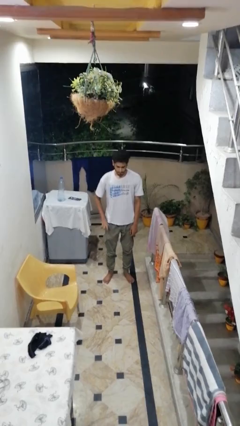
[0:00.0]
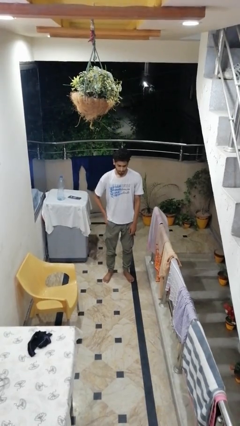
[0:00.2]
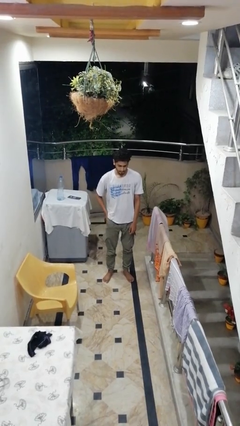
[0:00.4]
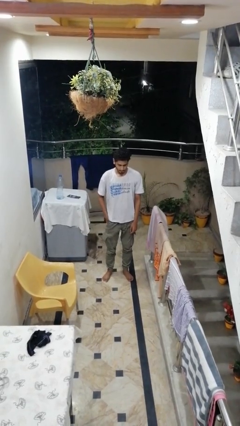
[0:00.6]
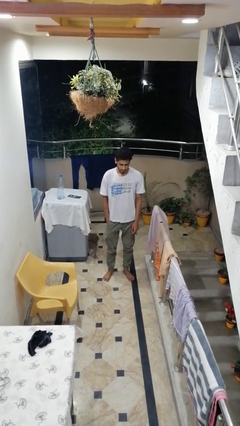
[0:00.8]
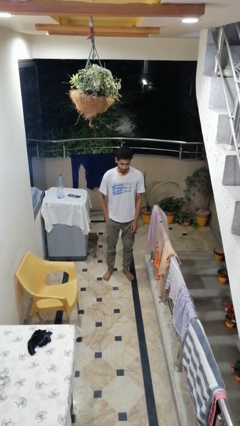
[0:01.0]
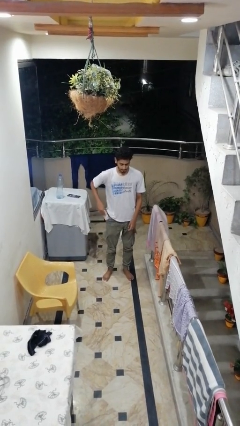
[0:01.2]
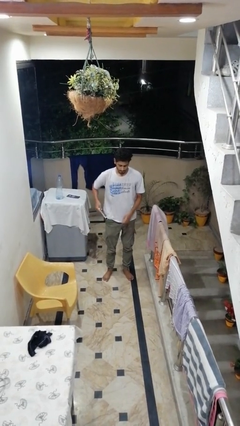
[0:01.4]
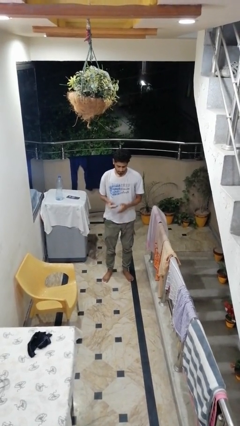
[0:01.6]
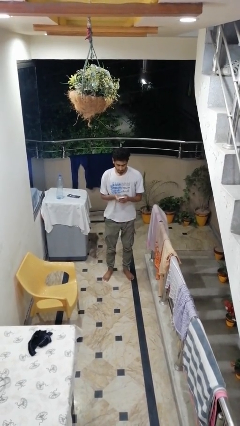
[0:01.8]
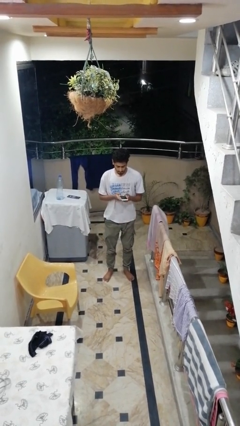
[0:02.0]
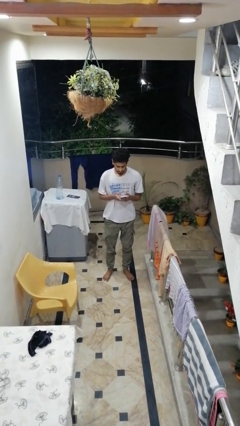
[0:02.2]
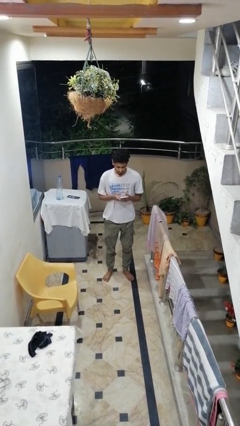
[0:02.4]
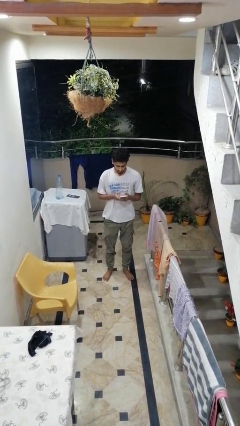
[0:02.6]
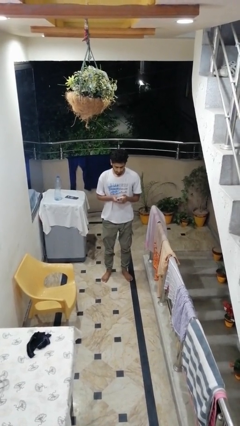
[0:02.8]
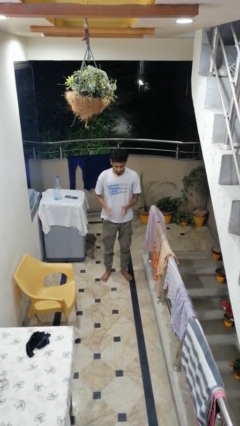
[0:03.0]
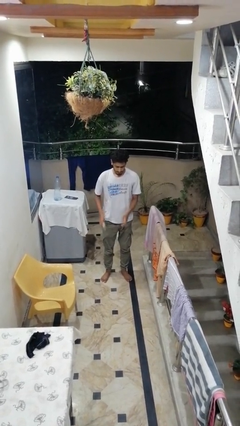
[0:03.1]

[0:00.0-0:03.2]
person takes phone from pocket

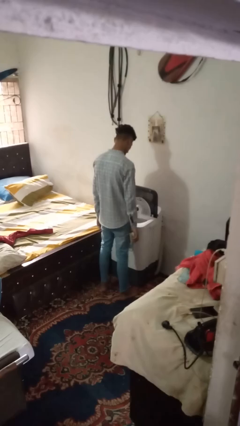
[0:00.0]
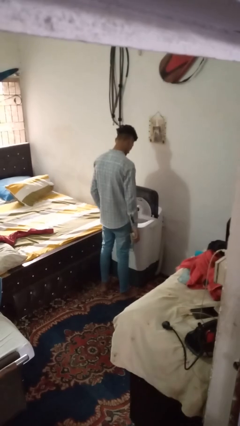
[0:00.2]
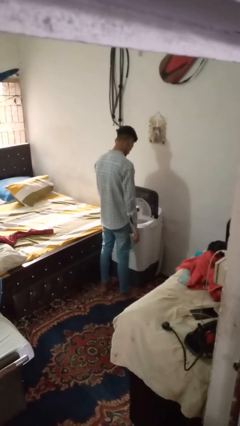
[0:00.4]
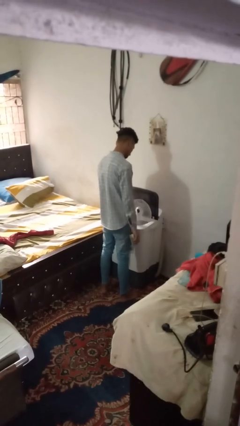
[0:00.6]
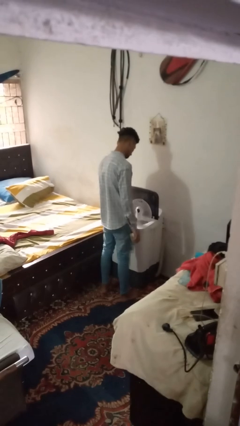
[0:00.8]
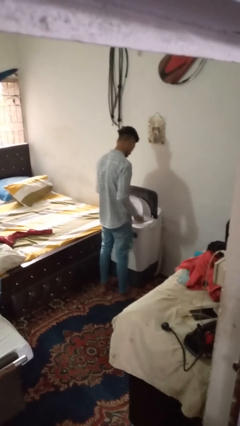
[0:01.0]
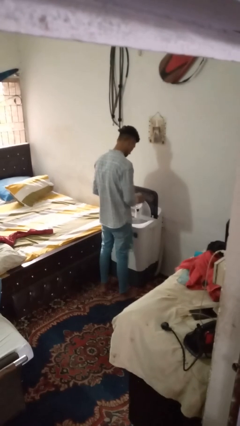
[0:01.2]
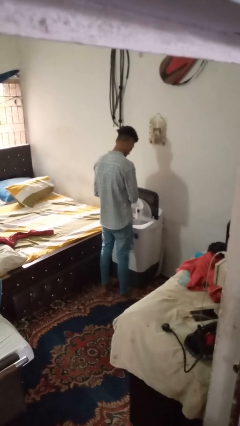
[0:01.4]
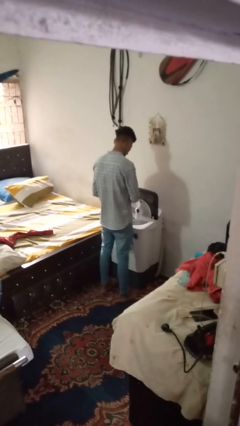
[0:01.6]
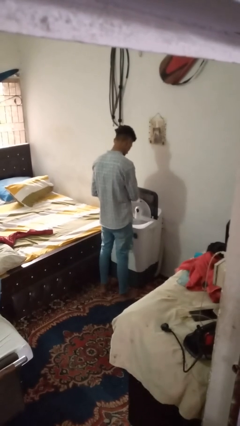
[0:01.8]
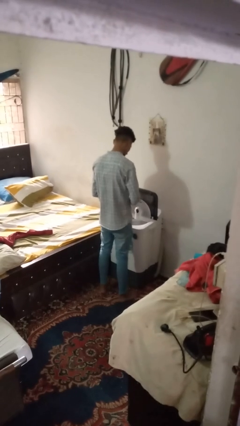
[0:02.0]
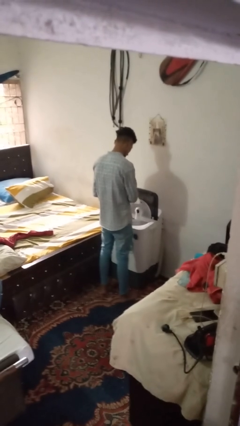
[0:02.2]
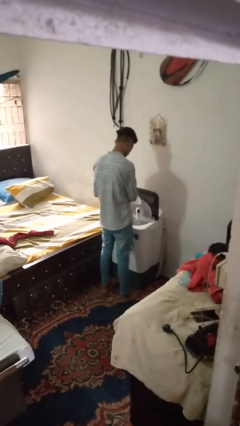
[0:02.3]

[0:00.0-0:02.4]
person cleans dryer lint trap

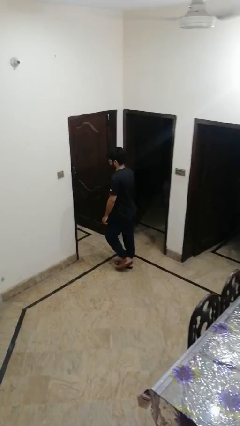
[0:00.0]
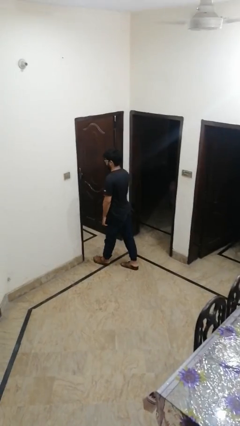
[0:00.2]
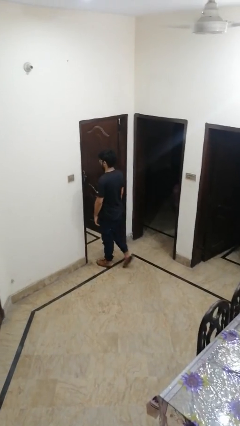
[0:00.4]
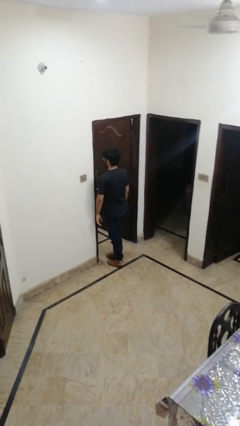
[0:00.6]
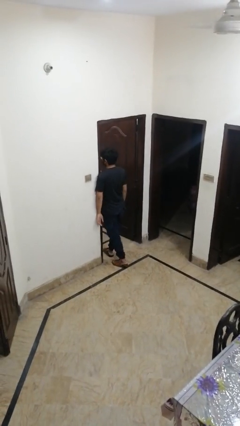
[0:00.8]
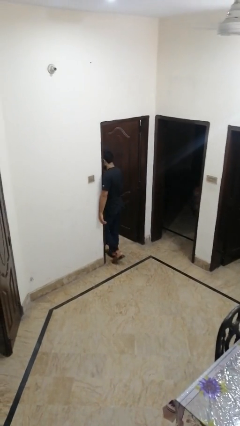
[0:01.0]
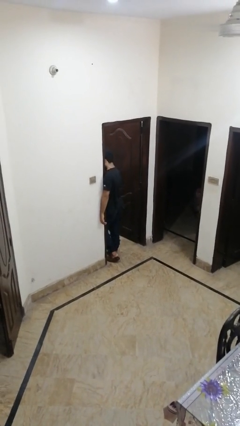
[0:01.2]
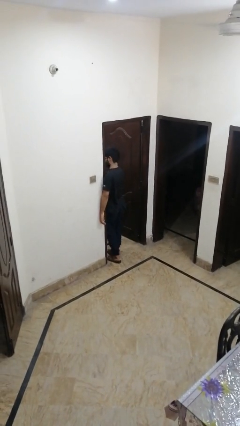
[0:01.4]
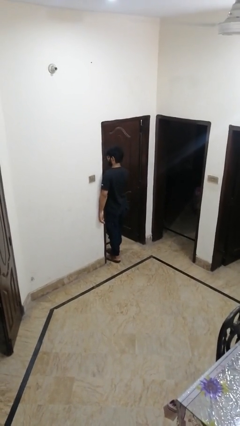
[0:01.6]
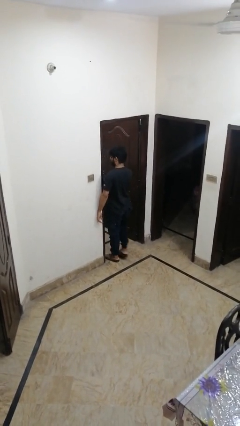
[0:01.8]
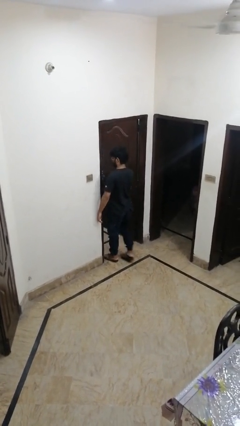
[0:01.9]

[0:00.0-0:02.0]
person bumps into wall

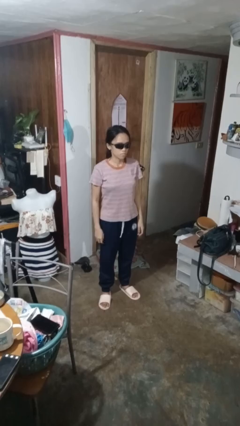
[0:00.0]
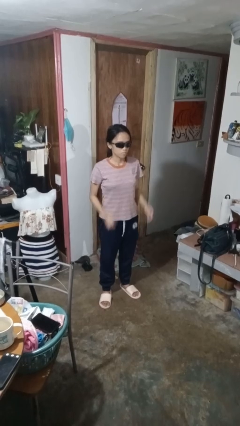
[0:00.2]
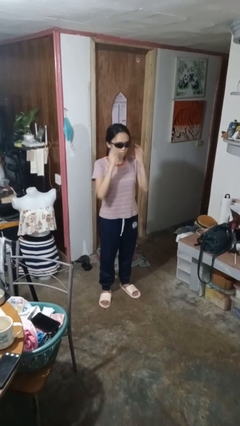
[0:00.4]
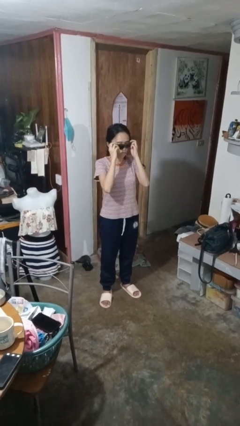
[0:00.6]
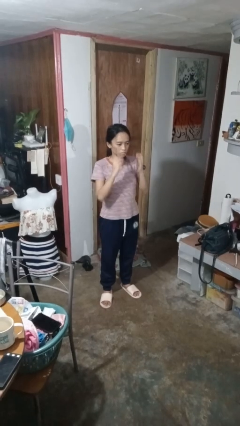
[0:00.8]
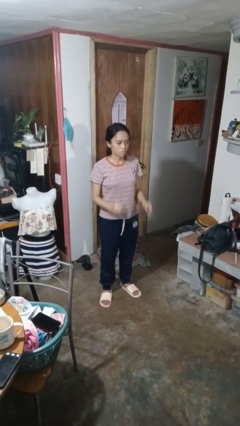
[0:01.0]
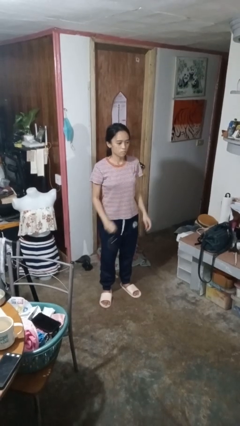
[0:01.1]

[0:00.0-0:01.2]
person takes off sunglasses

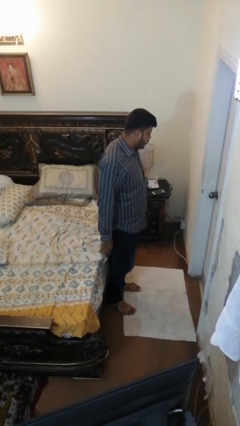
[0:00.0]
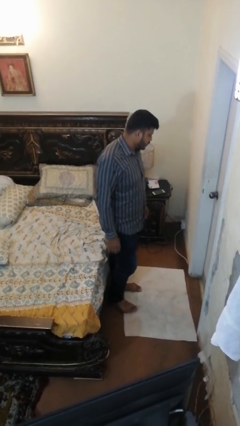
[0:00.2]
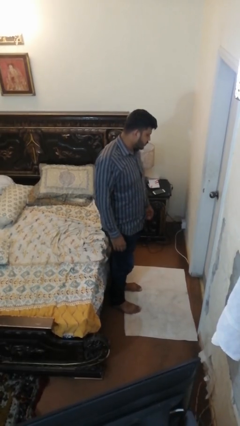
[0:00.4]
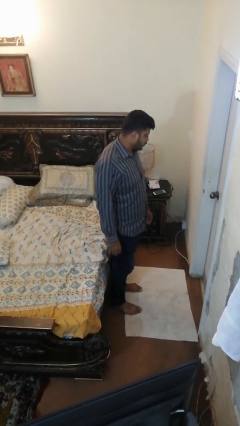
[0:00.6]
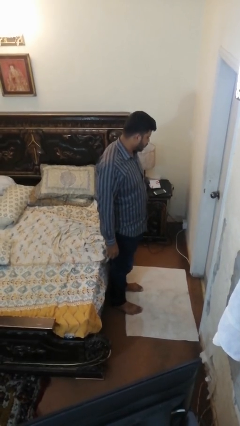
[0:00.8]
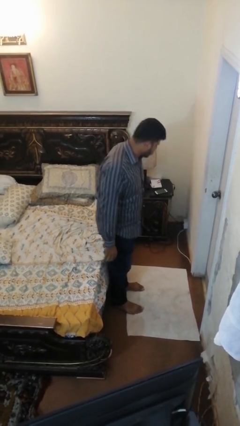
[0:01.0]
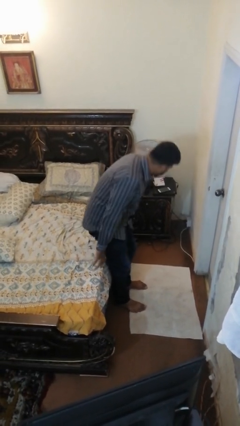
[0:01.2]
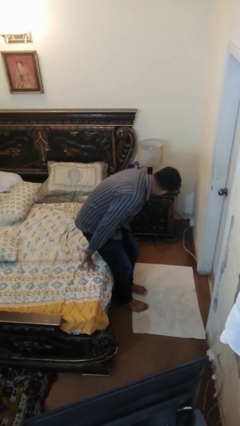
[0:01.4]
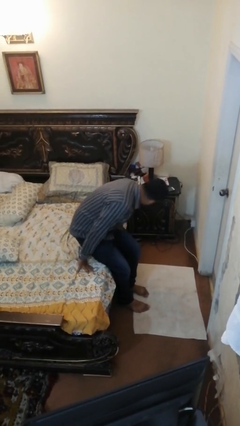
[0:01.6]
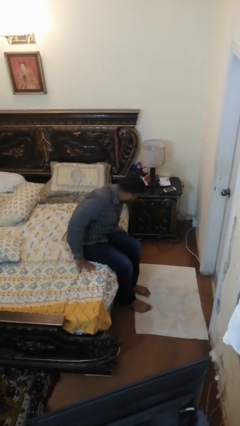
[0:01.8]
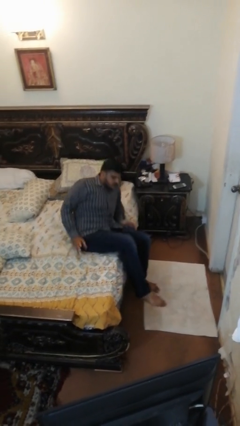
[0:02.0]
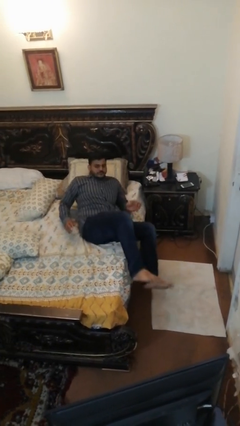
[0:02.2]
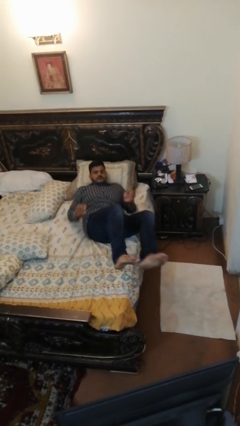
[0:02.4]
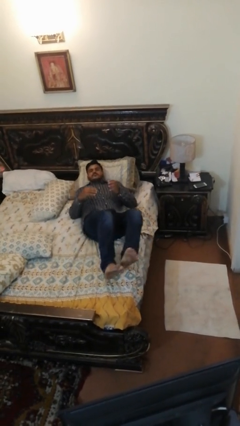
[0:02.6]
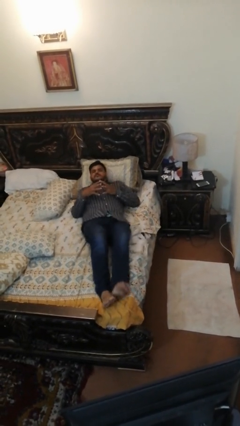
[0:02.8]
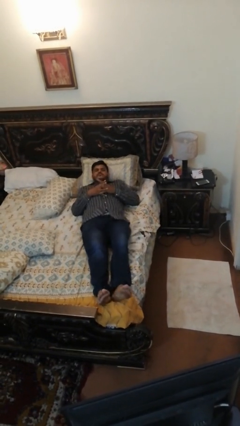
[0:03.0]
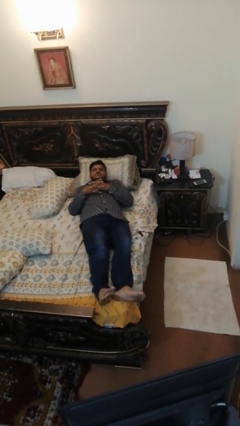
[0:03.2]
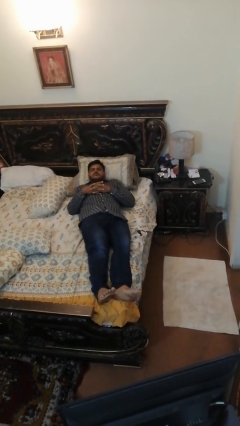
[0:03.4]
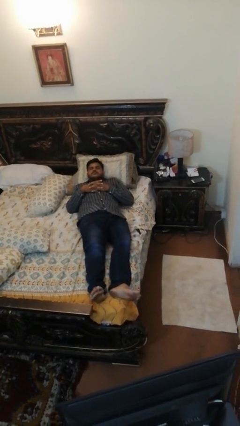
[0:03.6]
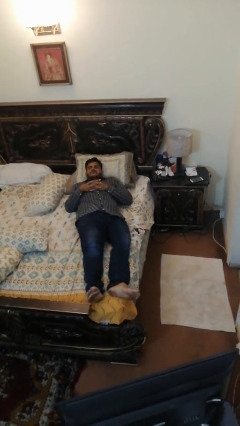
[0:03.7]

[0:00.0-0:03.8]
person lies down on bed

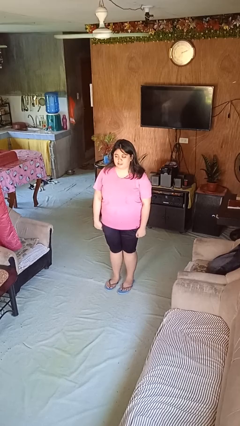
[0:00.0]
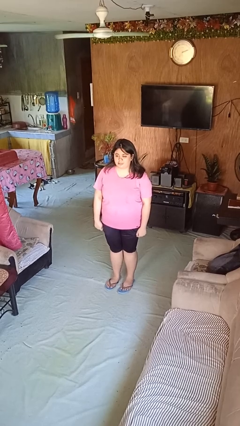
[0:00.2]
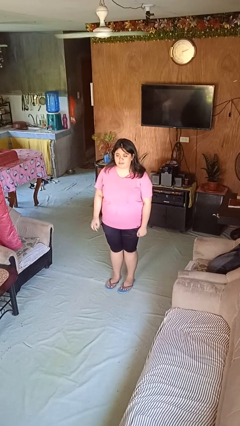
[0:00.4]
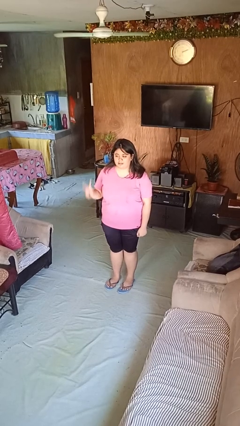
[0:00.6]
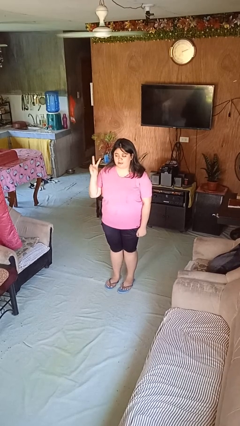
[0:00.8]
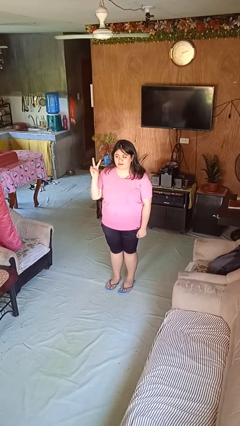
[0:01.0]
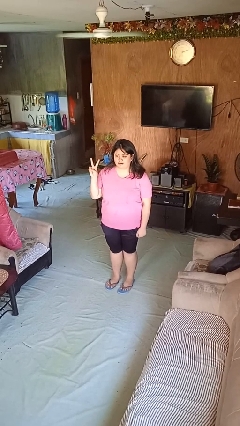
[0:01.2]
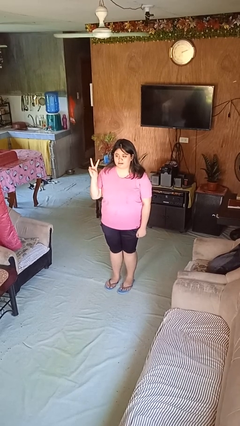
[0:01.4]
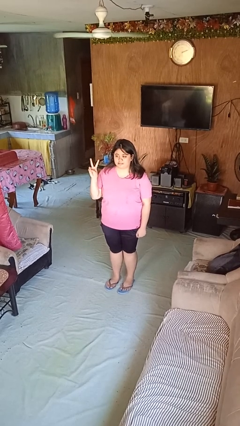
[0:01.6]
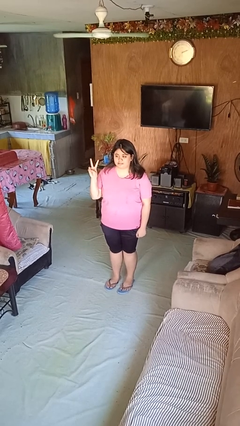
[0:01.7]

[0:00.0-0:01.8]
person gestures peace

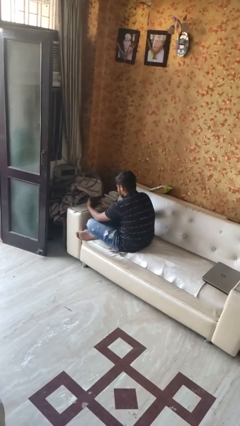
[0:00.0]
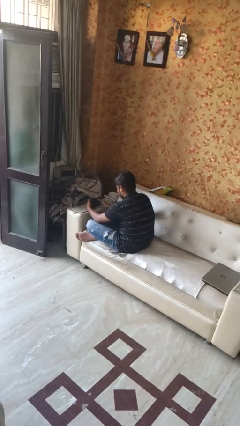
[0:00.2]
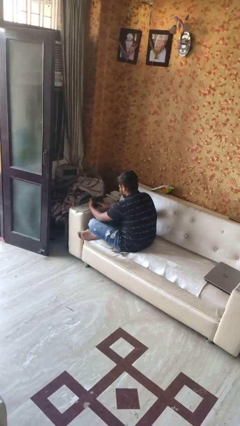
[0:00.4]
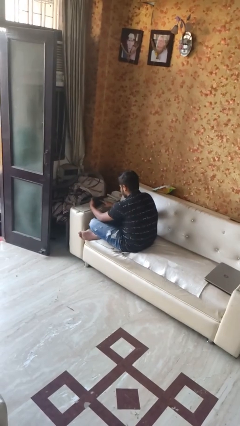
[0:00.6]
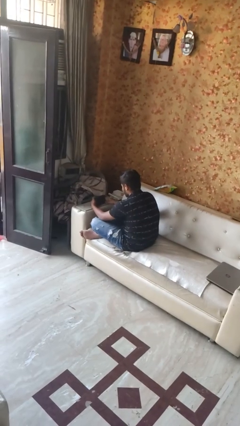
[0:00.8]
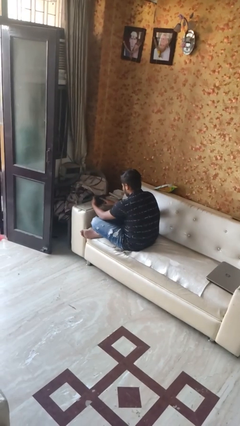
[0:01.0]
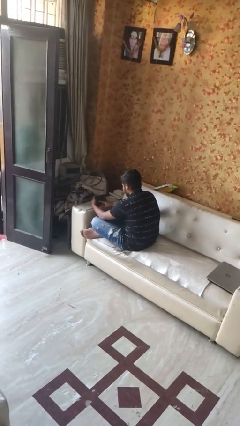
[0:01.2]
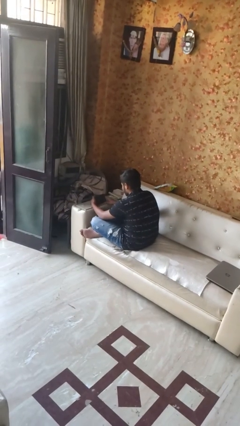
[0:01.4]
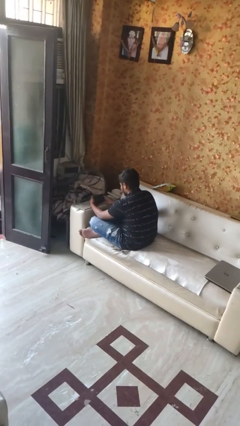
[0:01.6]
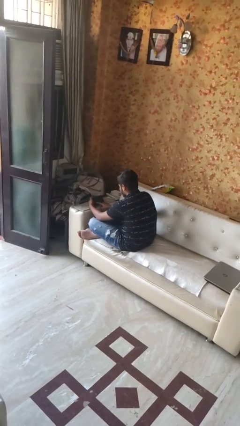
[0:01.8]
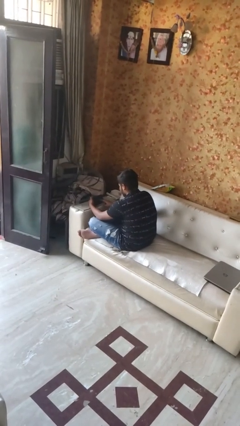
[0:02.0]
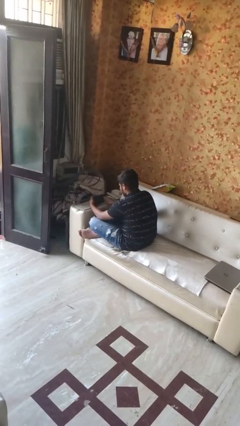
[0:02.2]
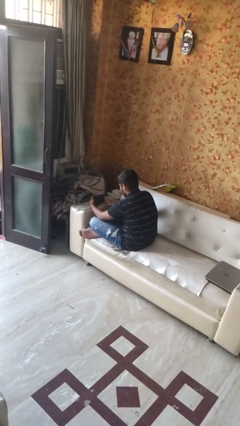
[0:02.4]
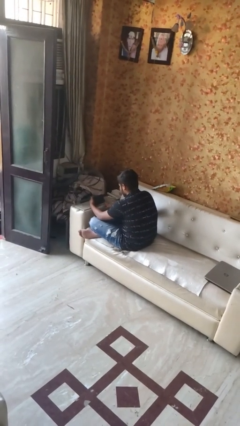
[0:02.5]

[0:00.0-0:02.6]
person interacts with tablet

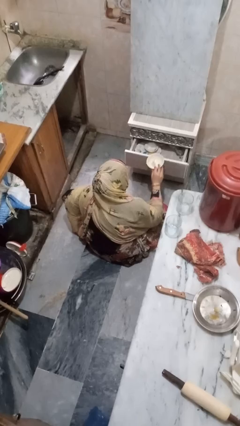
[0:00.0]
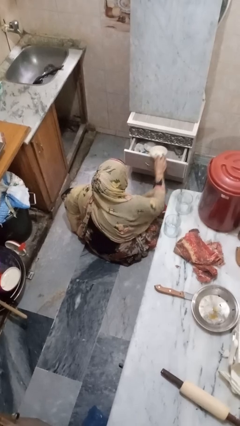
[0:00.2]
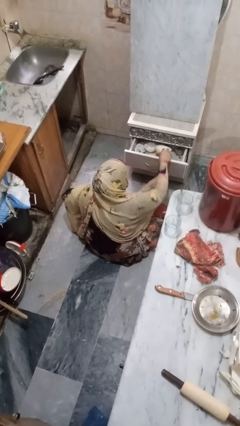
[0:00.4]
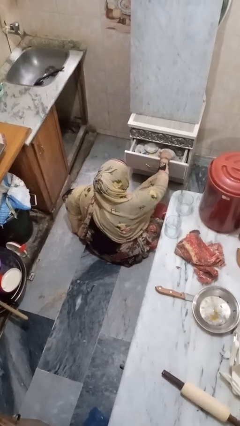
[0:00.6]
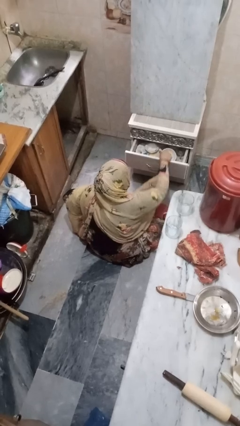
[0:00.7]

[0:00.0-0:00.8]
person puts object into kitchen drawer
